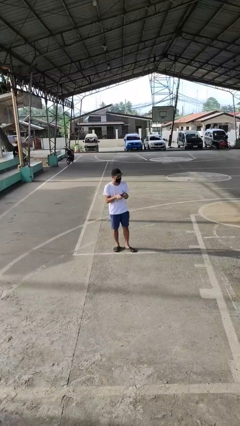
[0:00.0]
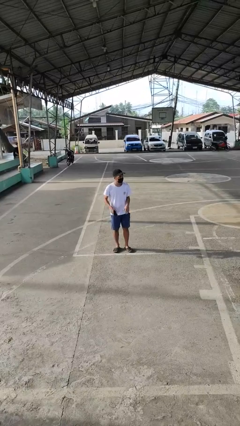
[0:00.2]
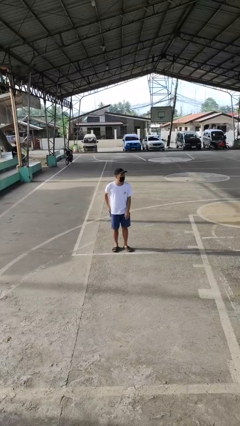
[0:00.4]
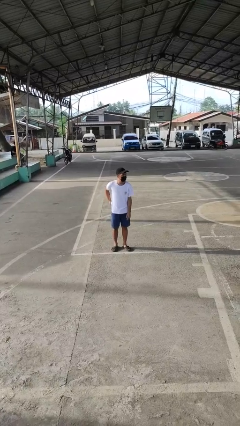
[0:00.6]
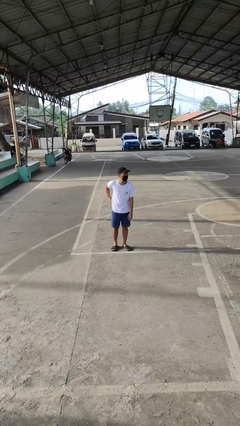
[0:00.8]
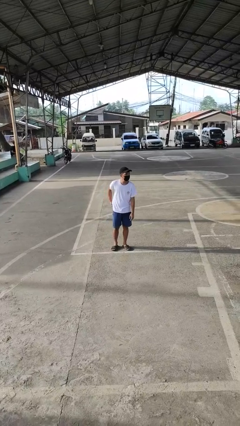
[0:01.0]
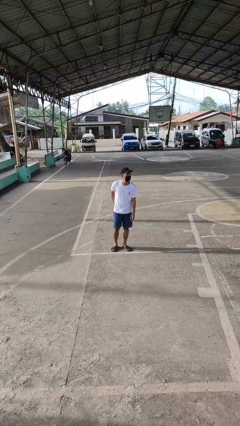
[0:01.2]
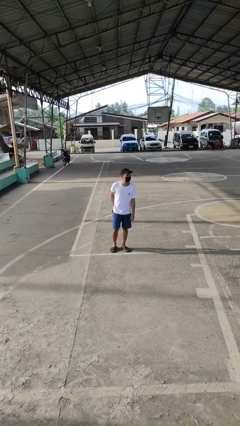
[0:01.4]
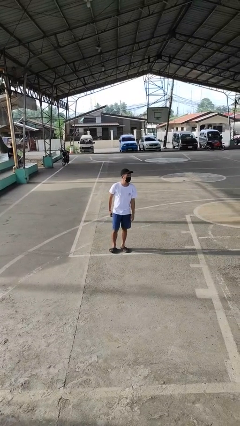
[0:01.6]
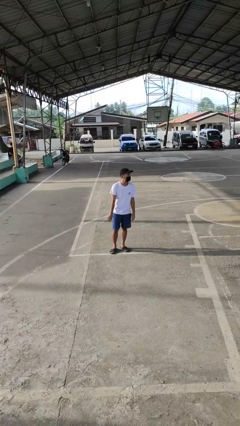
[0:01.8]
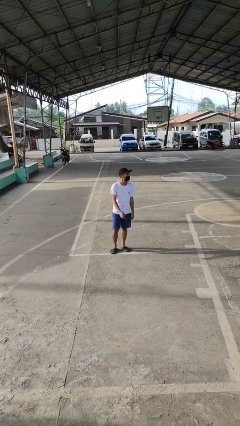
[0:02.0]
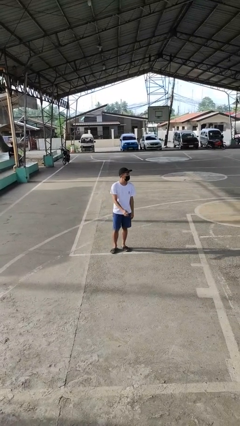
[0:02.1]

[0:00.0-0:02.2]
person puts phone into pocket

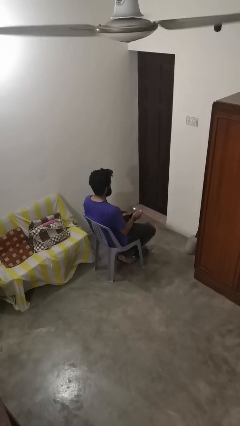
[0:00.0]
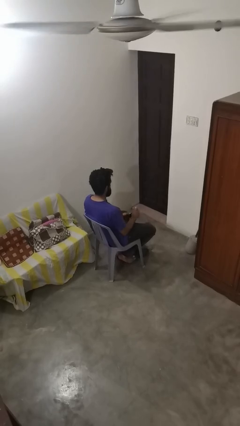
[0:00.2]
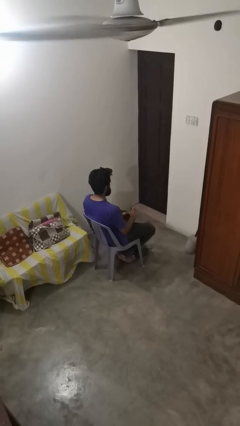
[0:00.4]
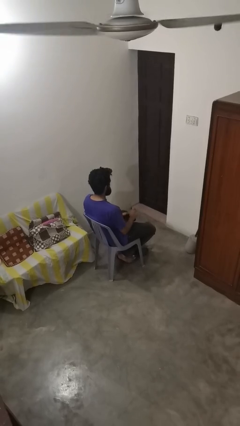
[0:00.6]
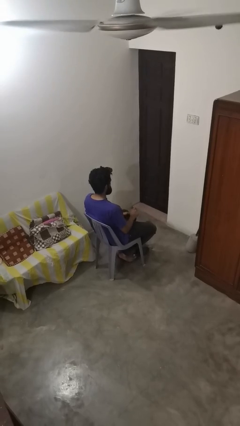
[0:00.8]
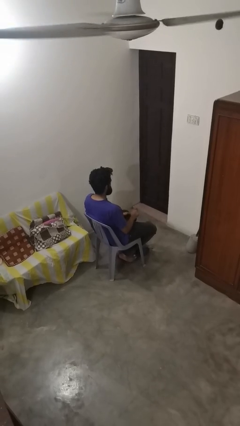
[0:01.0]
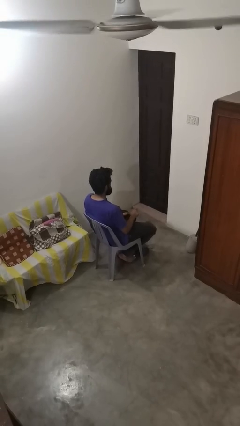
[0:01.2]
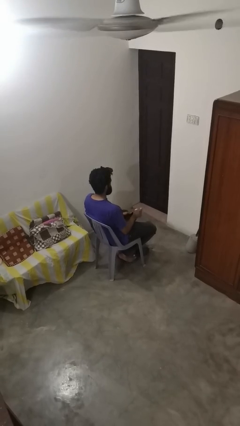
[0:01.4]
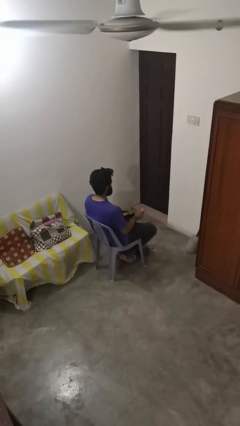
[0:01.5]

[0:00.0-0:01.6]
person stirs mug

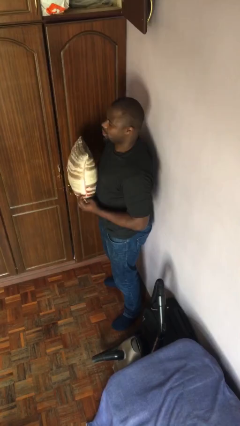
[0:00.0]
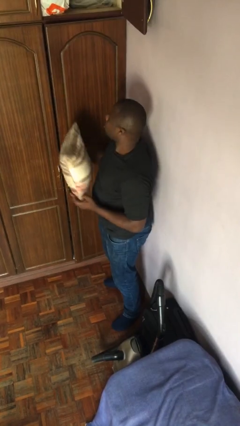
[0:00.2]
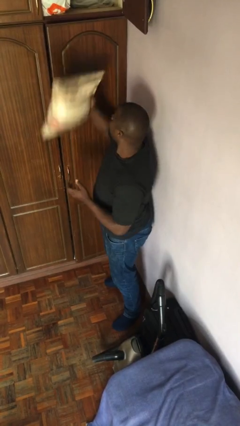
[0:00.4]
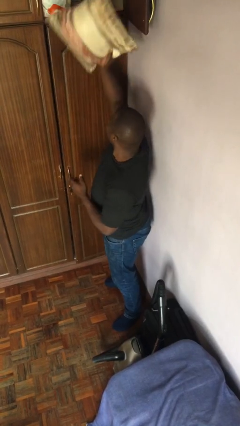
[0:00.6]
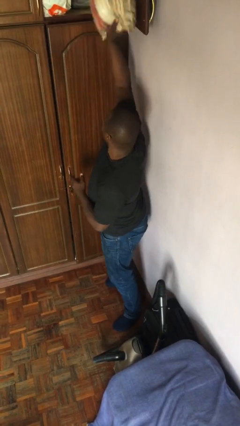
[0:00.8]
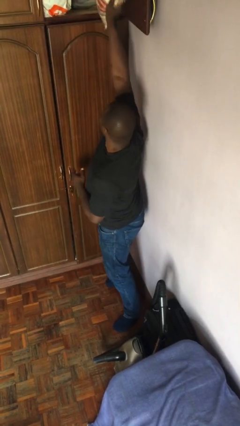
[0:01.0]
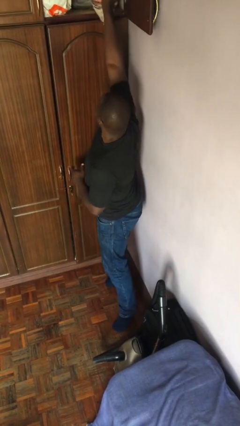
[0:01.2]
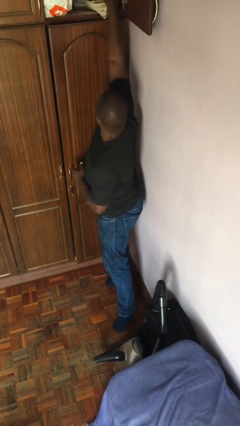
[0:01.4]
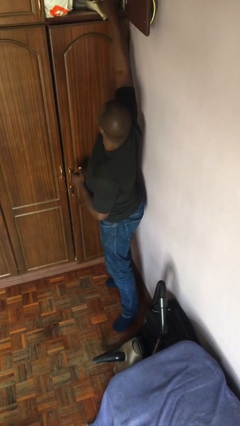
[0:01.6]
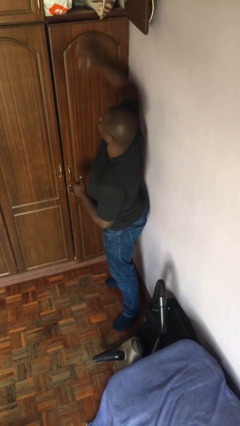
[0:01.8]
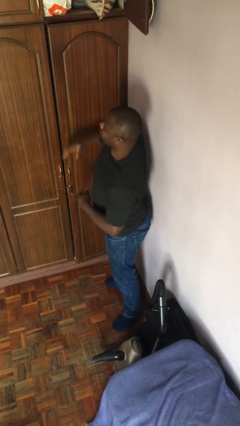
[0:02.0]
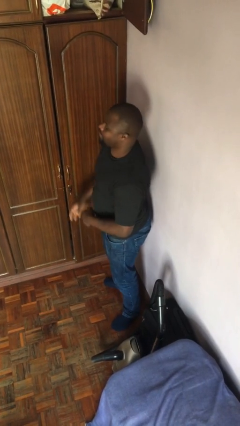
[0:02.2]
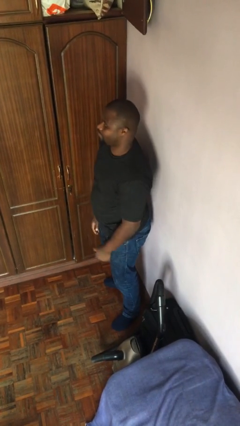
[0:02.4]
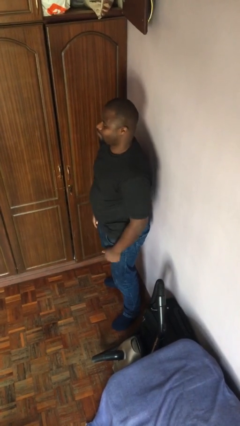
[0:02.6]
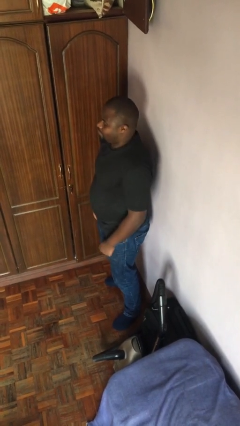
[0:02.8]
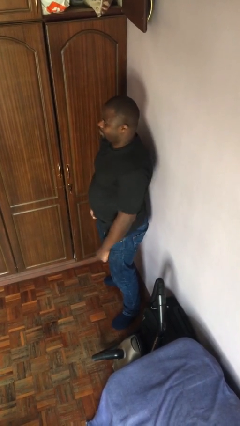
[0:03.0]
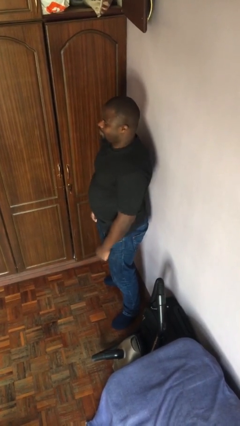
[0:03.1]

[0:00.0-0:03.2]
person puts down object on shelf

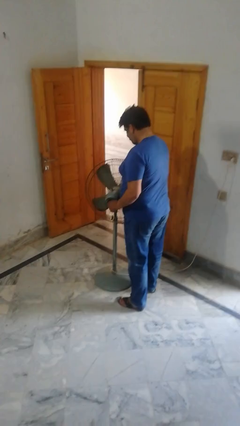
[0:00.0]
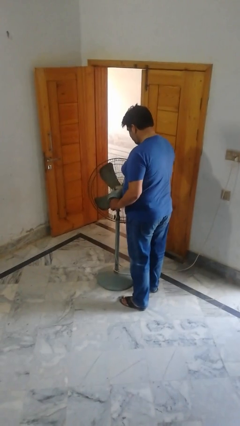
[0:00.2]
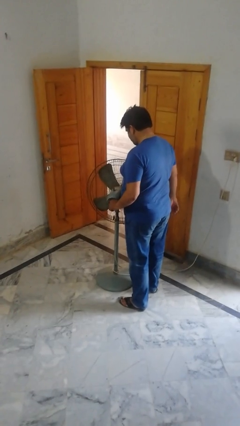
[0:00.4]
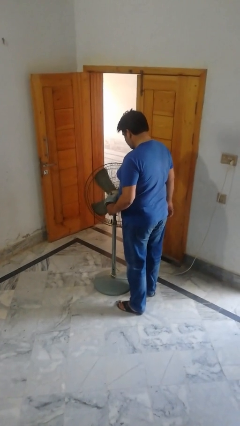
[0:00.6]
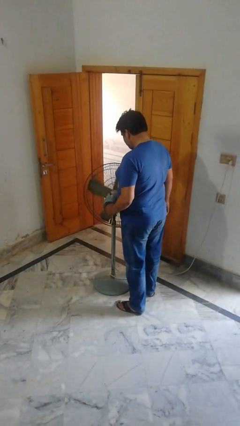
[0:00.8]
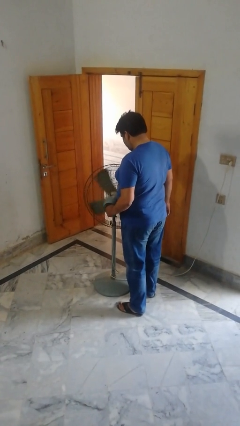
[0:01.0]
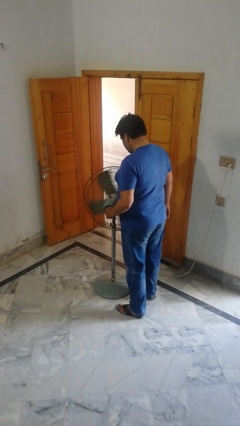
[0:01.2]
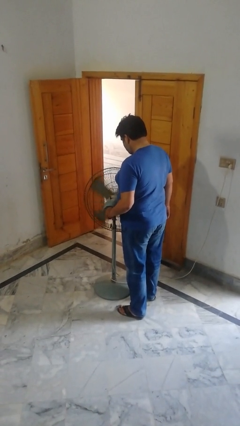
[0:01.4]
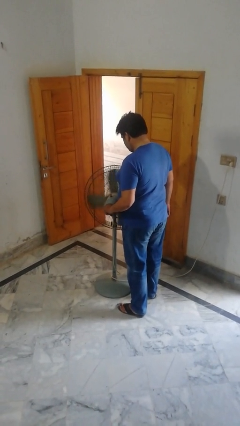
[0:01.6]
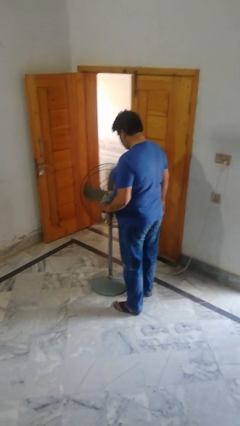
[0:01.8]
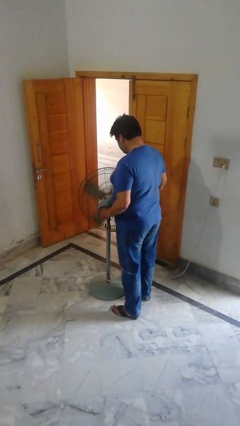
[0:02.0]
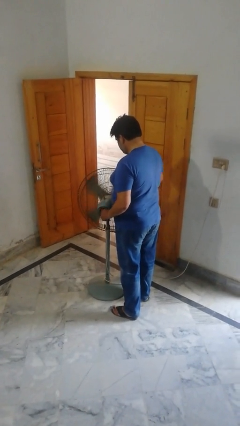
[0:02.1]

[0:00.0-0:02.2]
person turns on fan

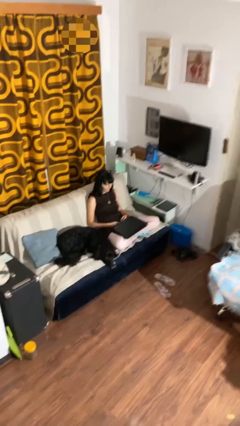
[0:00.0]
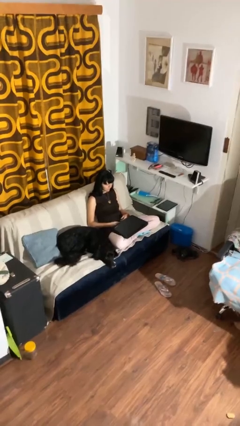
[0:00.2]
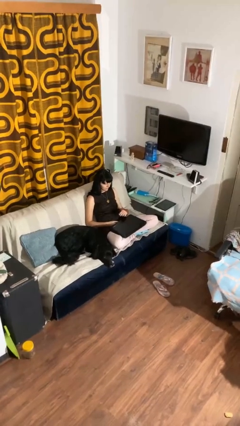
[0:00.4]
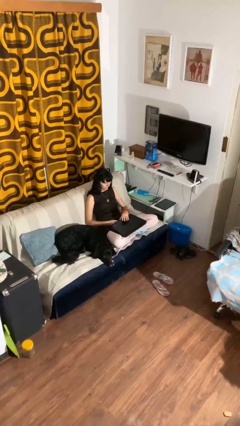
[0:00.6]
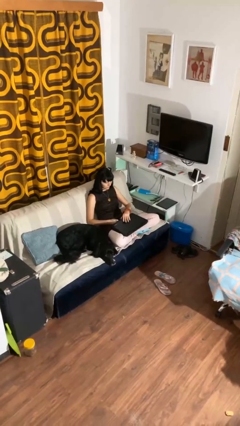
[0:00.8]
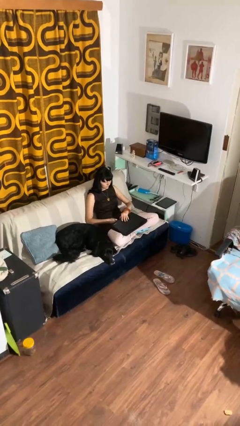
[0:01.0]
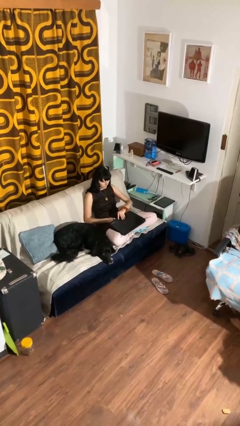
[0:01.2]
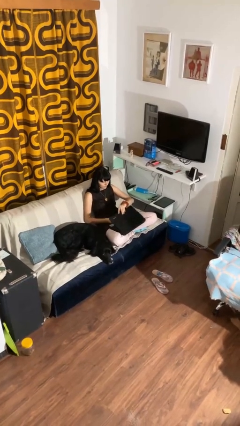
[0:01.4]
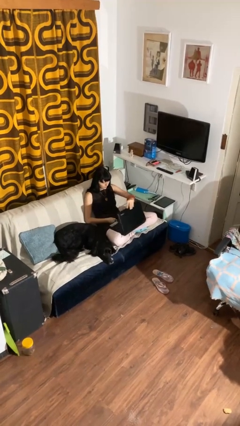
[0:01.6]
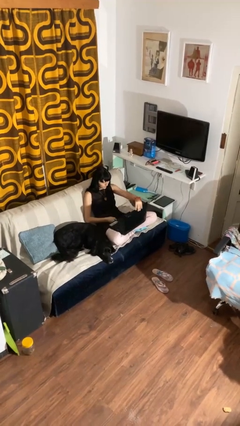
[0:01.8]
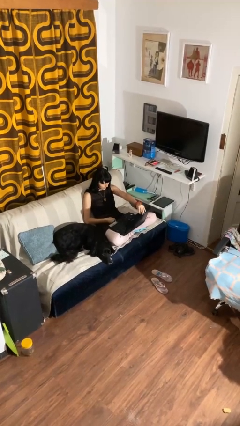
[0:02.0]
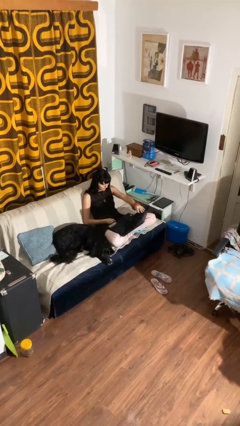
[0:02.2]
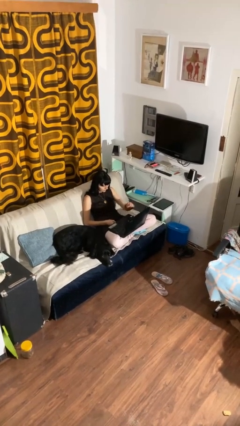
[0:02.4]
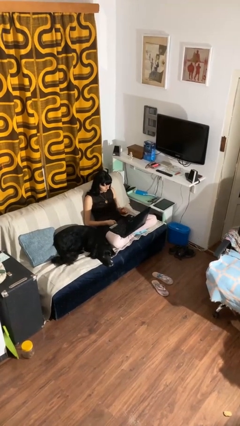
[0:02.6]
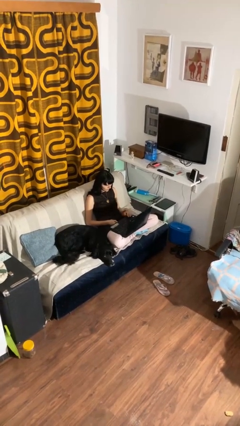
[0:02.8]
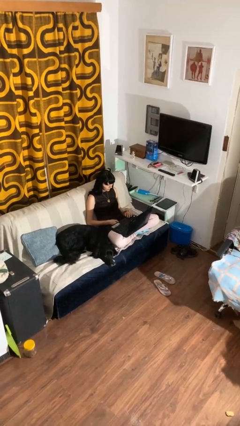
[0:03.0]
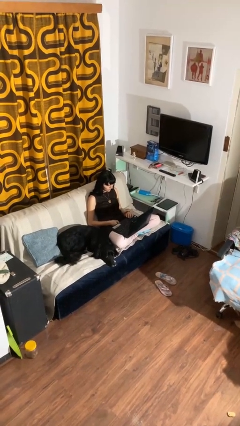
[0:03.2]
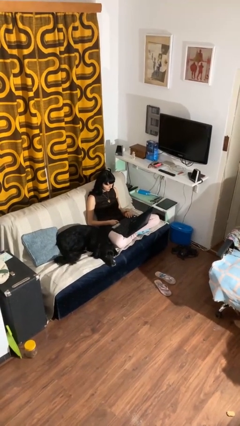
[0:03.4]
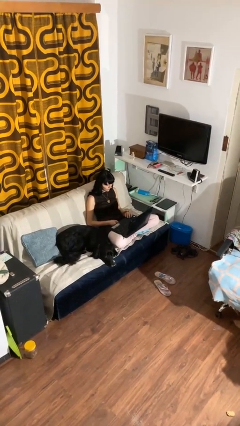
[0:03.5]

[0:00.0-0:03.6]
person opens laptop

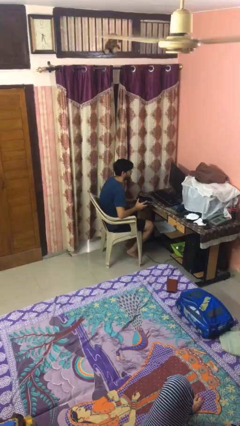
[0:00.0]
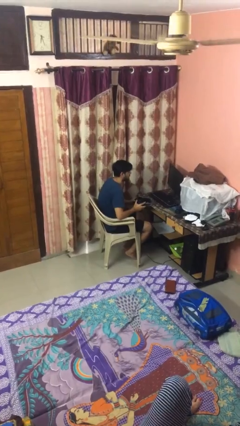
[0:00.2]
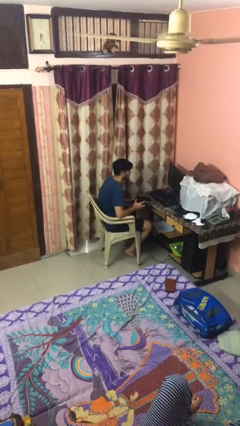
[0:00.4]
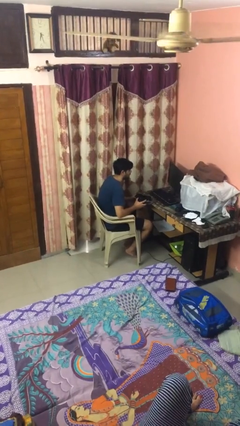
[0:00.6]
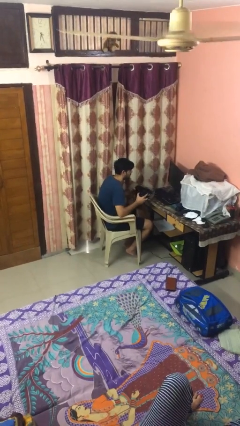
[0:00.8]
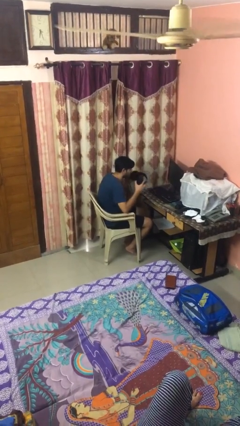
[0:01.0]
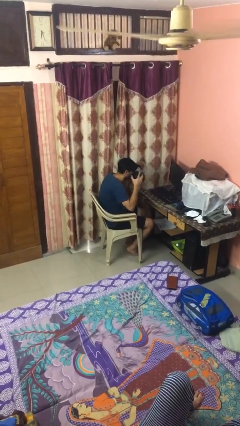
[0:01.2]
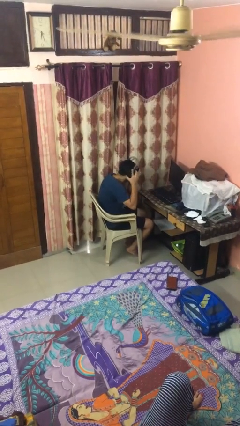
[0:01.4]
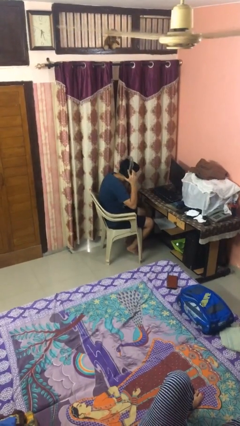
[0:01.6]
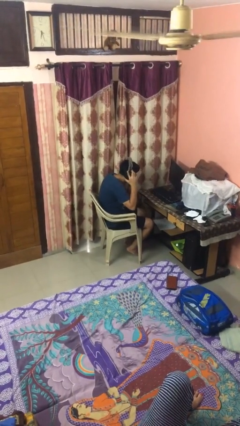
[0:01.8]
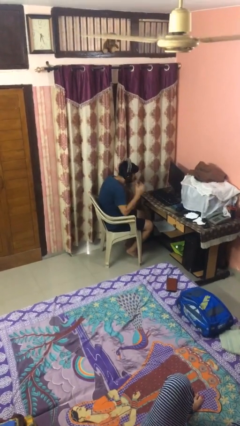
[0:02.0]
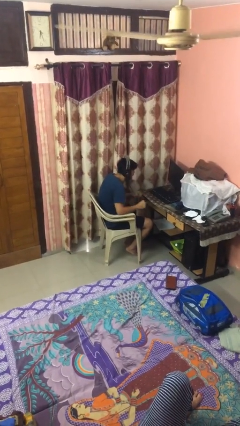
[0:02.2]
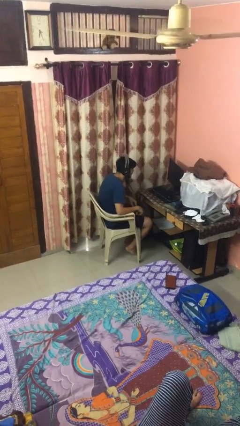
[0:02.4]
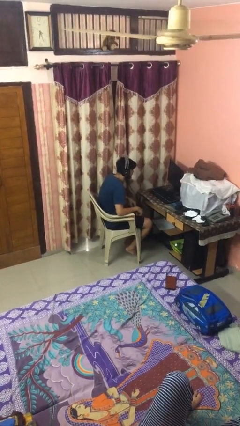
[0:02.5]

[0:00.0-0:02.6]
person puts on headphones

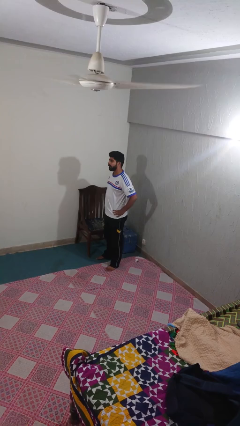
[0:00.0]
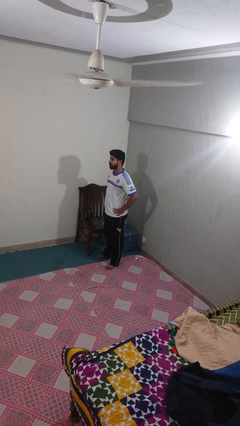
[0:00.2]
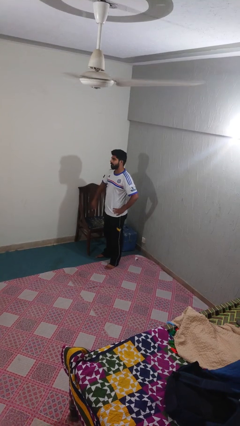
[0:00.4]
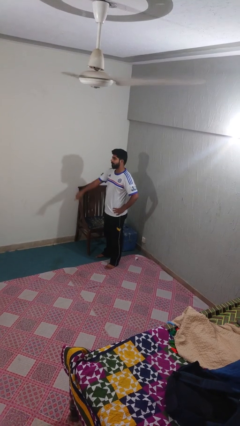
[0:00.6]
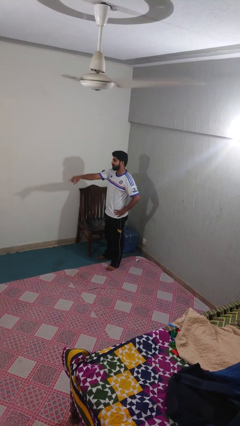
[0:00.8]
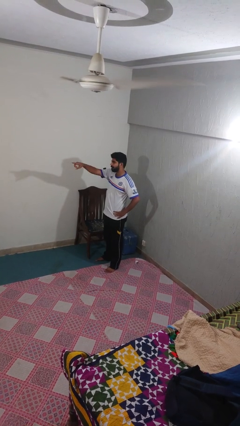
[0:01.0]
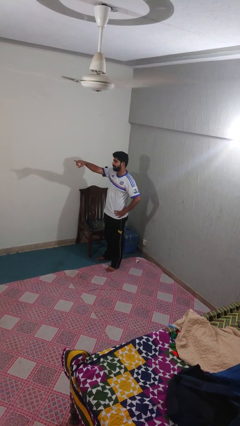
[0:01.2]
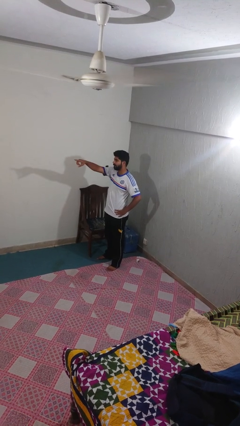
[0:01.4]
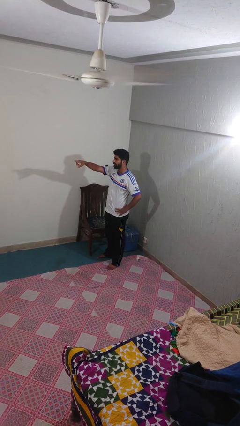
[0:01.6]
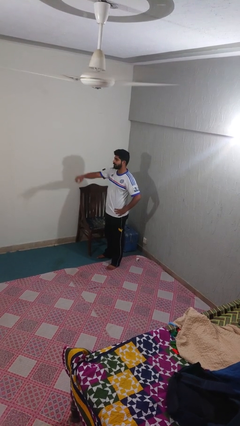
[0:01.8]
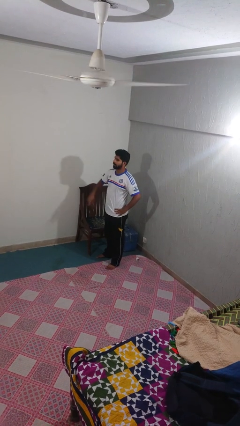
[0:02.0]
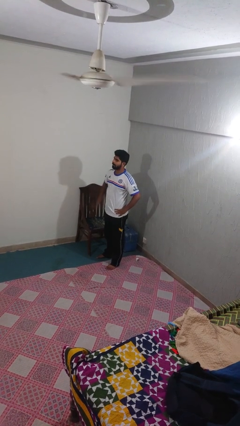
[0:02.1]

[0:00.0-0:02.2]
person points at person
